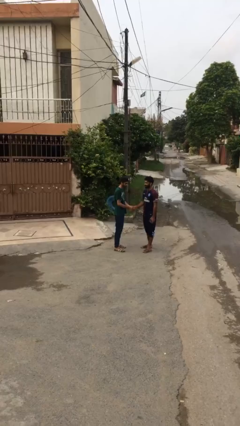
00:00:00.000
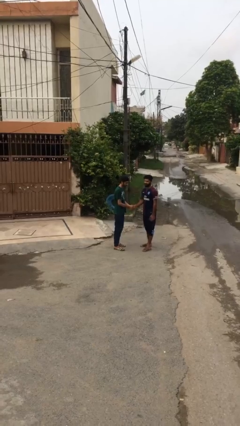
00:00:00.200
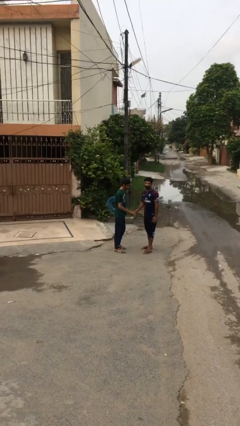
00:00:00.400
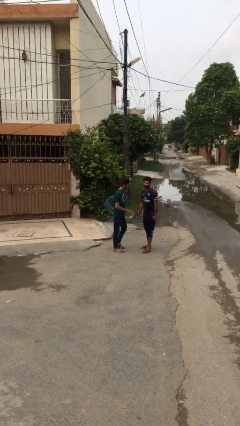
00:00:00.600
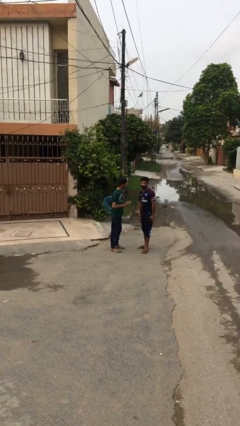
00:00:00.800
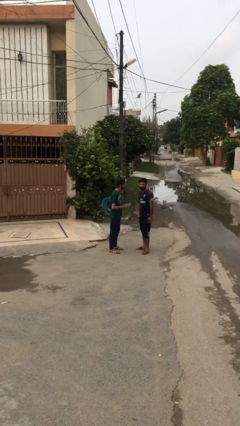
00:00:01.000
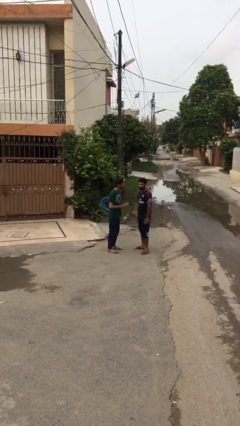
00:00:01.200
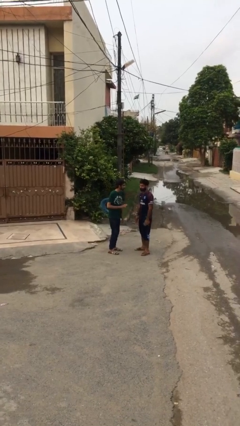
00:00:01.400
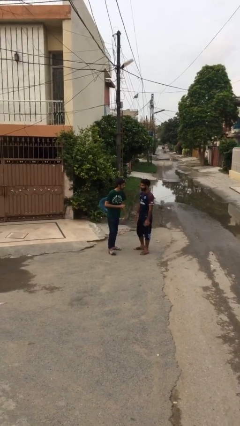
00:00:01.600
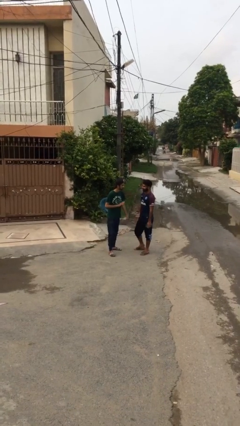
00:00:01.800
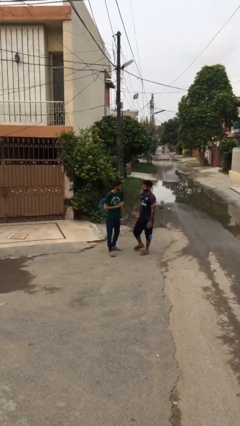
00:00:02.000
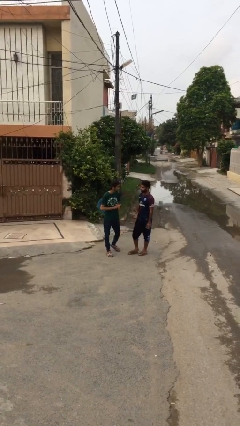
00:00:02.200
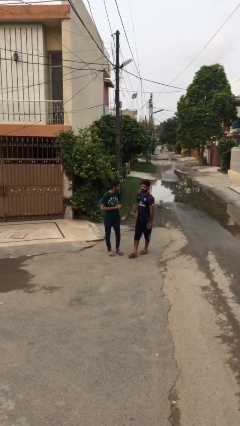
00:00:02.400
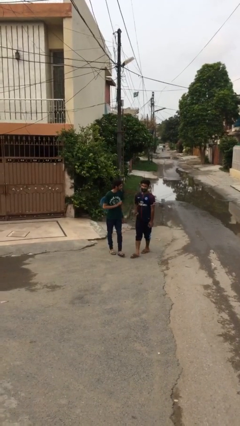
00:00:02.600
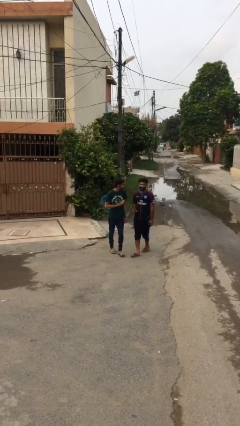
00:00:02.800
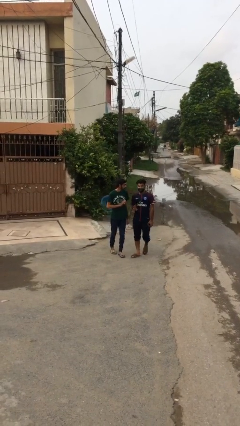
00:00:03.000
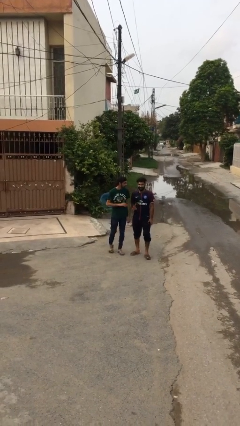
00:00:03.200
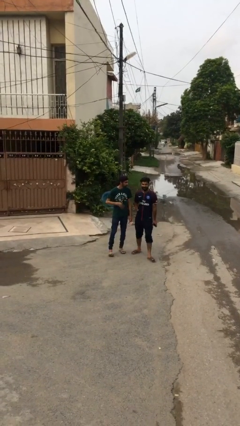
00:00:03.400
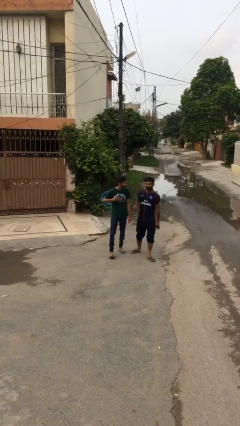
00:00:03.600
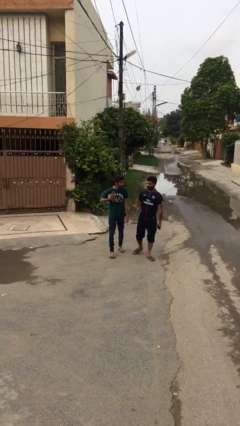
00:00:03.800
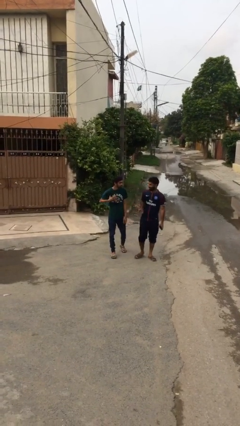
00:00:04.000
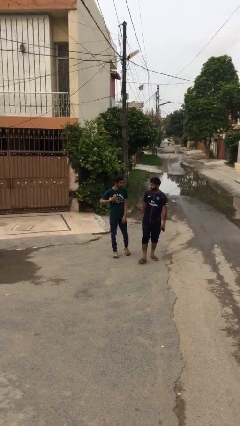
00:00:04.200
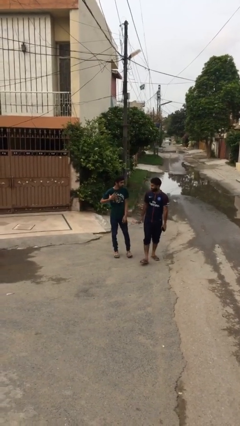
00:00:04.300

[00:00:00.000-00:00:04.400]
person talks to person

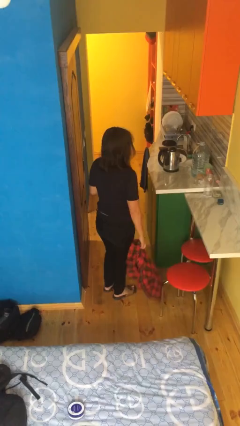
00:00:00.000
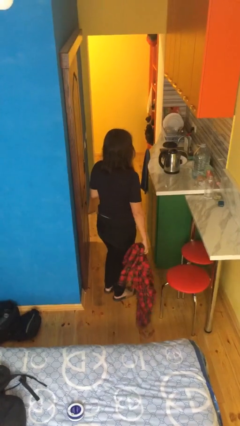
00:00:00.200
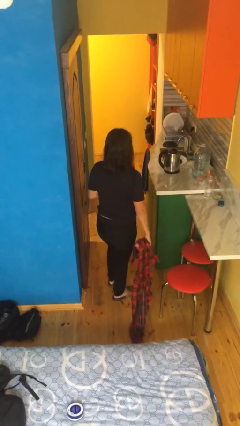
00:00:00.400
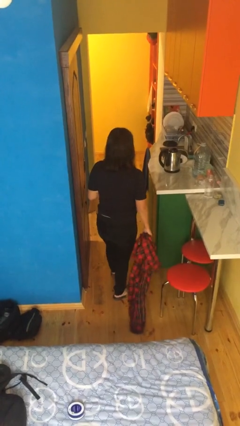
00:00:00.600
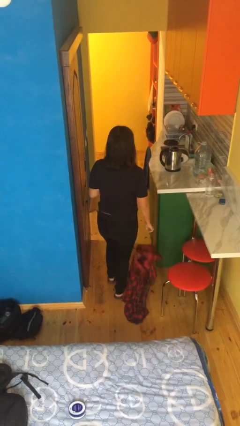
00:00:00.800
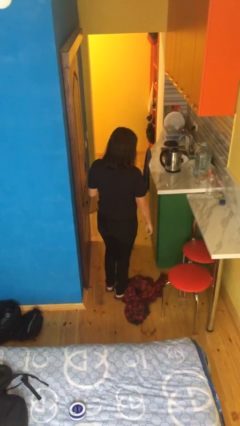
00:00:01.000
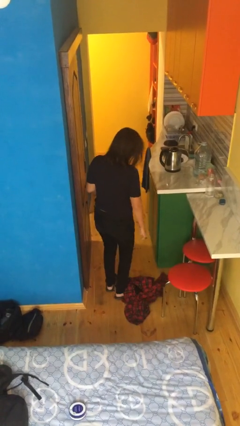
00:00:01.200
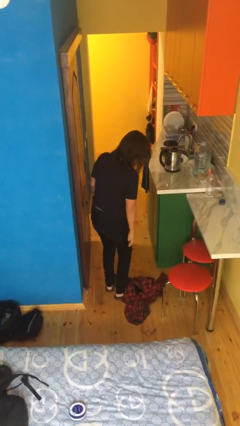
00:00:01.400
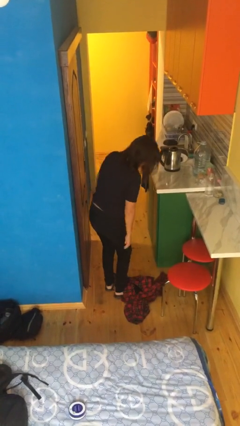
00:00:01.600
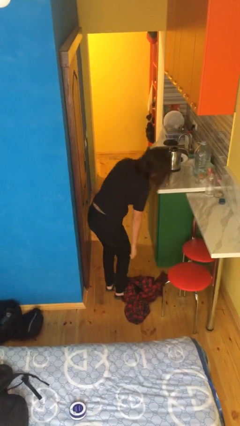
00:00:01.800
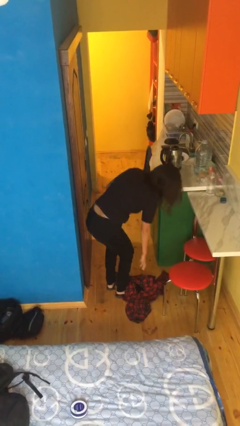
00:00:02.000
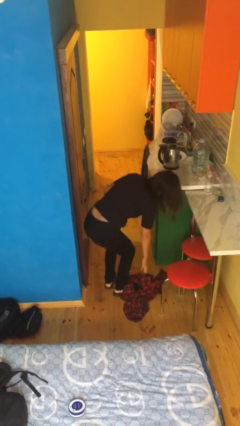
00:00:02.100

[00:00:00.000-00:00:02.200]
person drops object

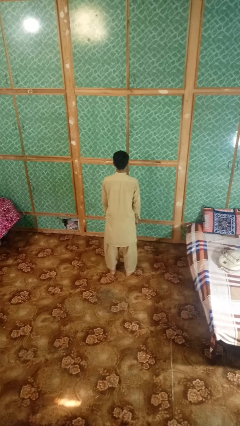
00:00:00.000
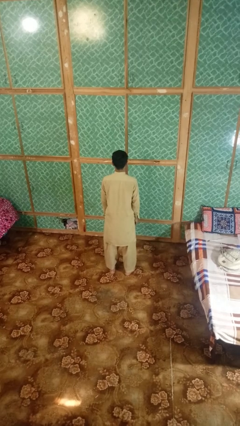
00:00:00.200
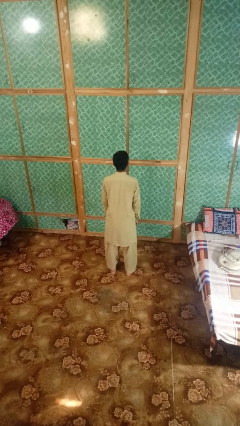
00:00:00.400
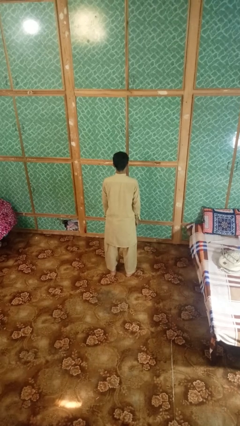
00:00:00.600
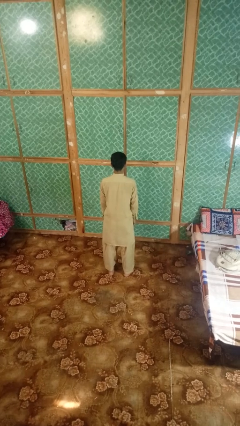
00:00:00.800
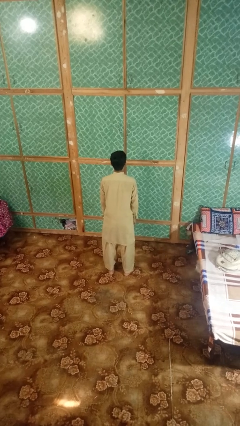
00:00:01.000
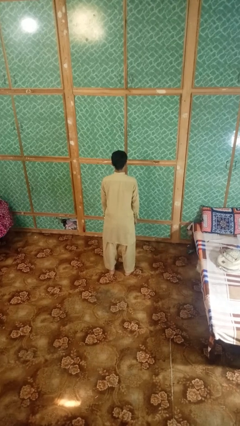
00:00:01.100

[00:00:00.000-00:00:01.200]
person shakes head

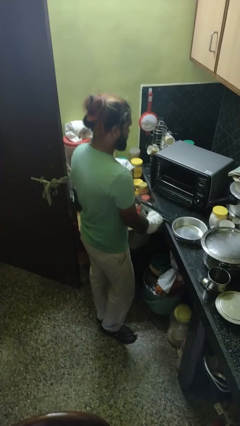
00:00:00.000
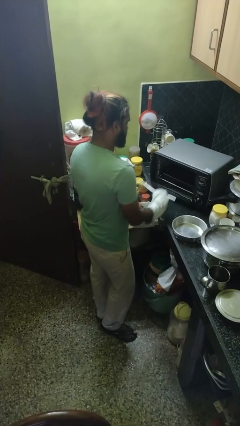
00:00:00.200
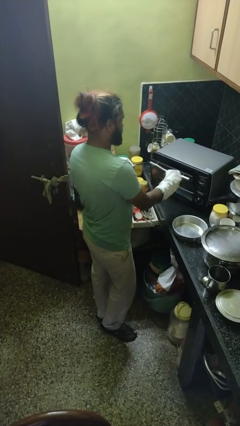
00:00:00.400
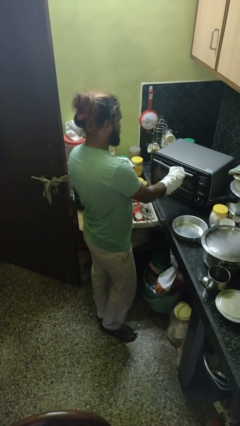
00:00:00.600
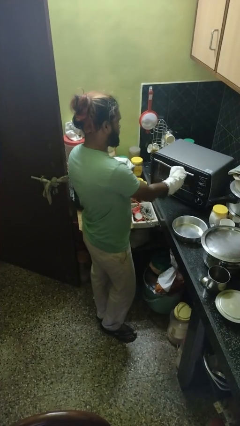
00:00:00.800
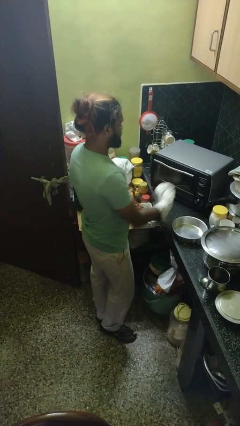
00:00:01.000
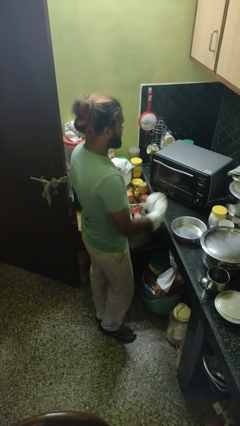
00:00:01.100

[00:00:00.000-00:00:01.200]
person closes oven door

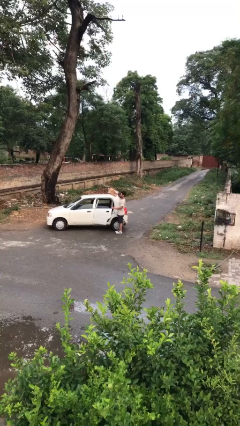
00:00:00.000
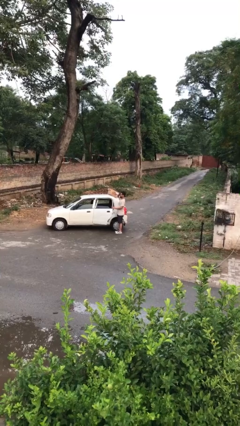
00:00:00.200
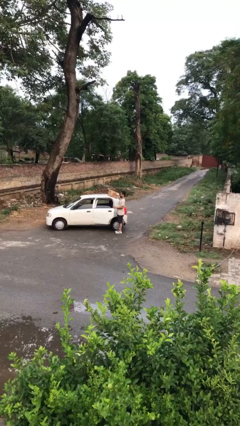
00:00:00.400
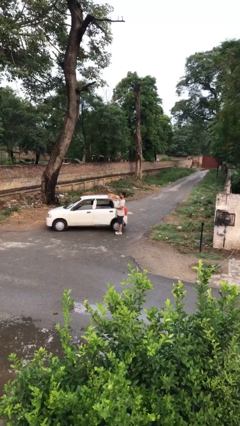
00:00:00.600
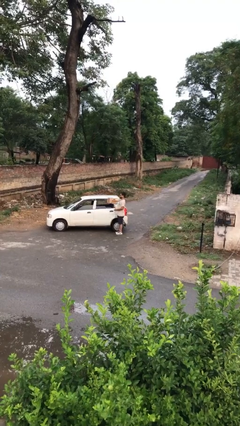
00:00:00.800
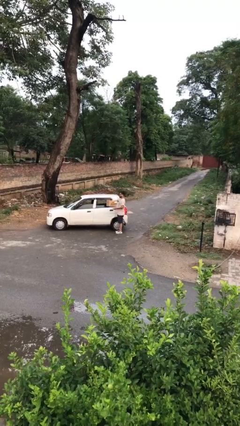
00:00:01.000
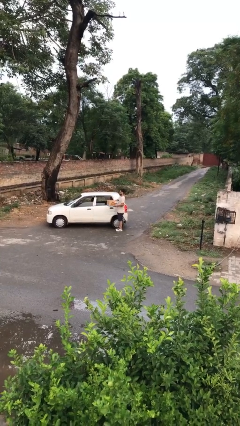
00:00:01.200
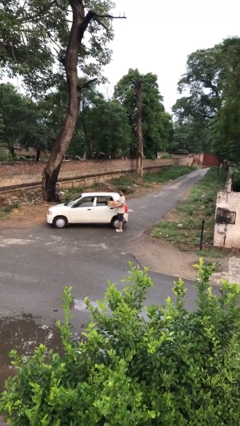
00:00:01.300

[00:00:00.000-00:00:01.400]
person closes car door

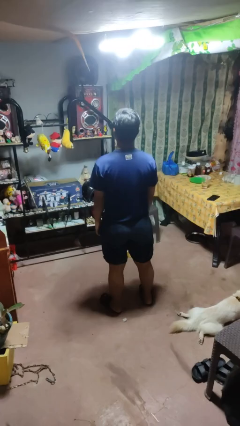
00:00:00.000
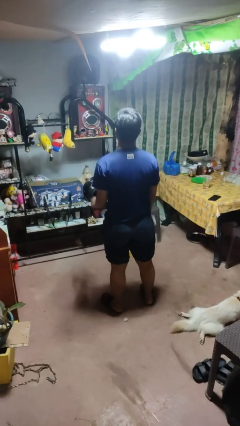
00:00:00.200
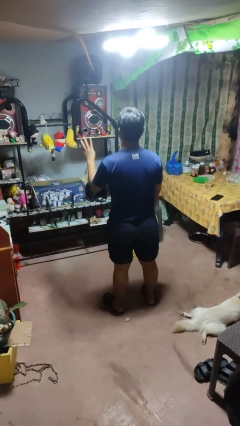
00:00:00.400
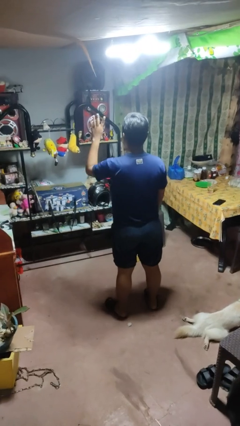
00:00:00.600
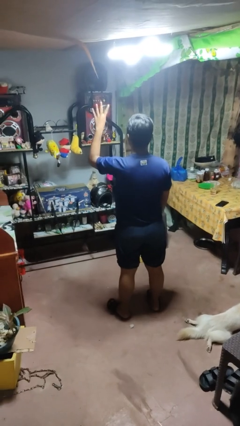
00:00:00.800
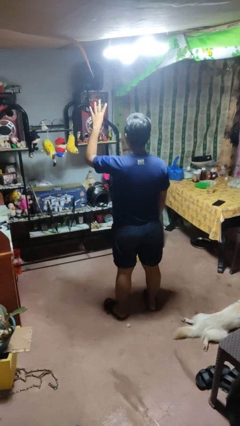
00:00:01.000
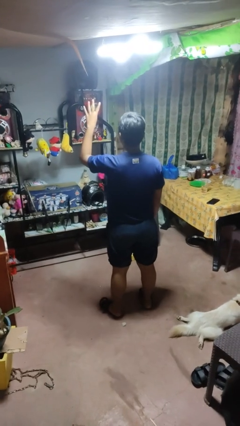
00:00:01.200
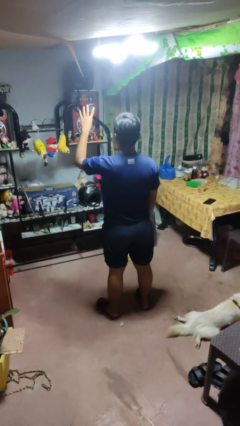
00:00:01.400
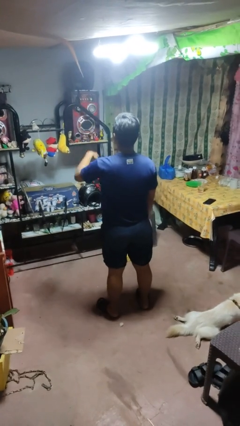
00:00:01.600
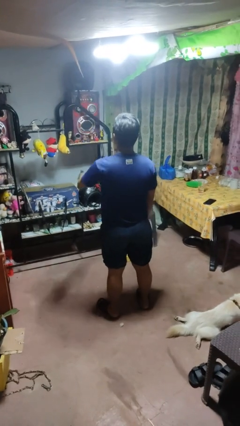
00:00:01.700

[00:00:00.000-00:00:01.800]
person gestures number four

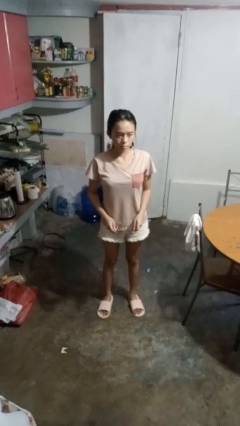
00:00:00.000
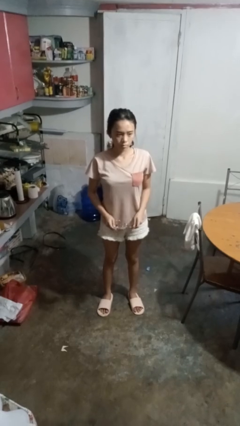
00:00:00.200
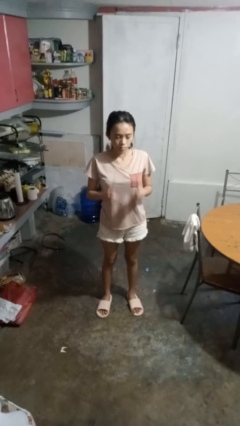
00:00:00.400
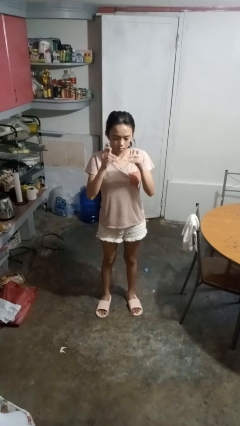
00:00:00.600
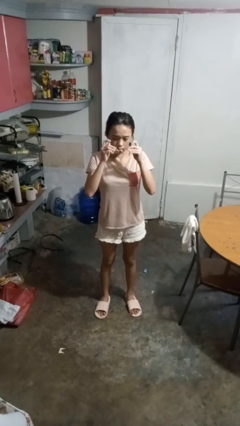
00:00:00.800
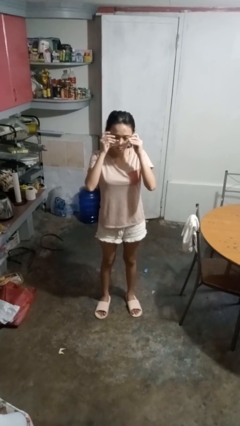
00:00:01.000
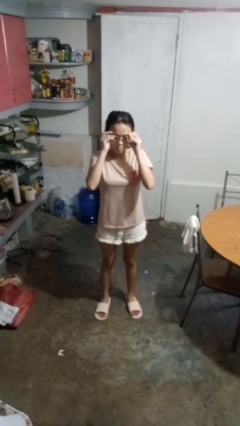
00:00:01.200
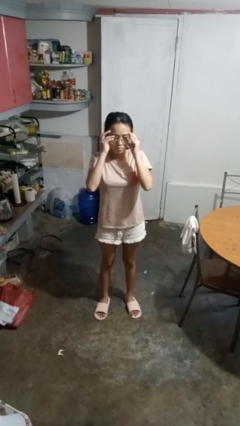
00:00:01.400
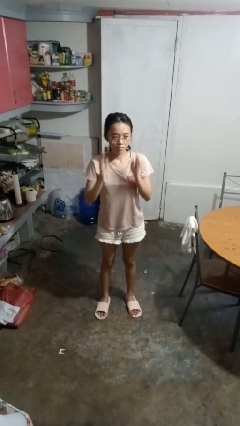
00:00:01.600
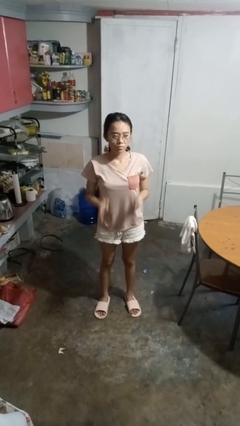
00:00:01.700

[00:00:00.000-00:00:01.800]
person puts on glasses

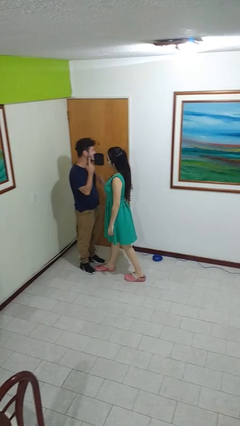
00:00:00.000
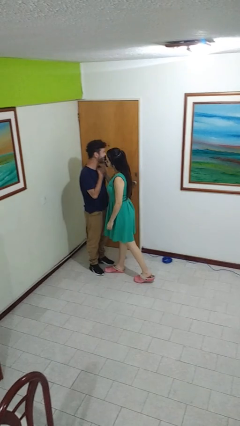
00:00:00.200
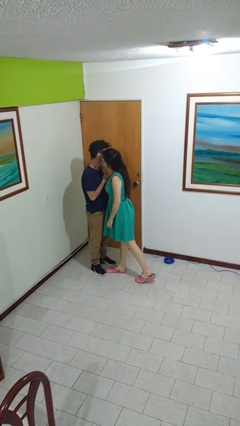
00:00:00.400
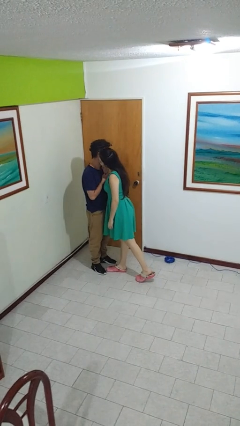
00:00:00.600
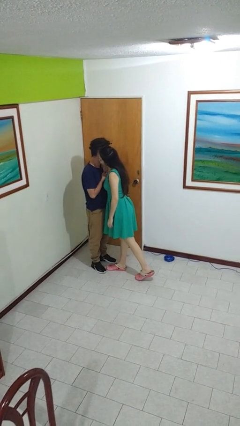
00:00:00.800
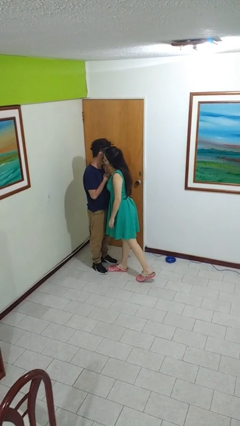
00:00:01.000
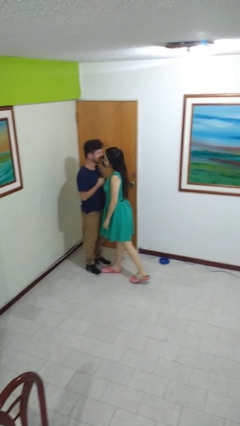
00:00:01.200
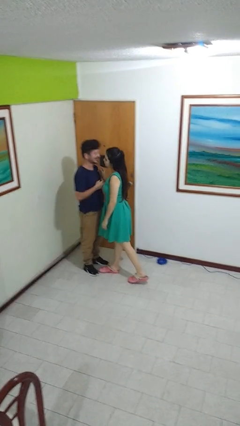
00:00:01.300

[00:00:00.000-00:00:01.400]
person kisses cheek of person

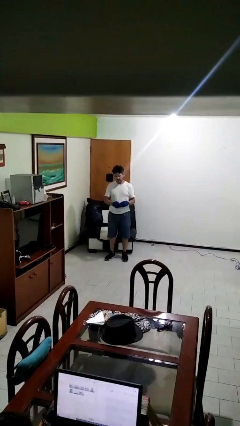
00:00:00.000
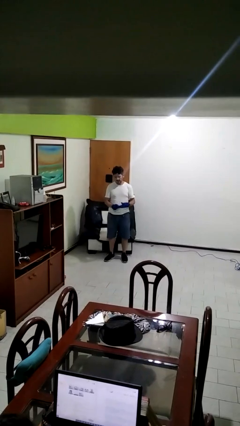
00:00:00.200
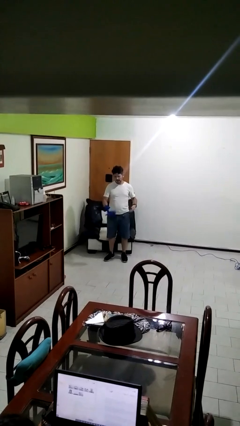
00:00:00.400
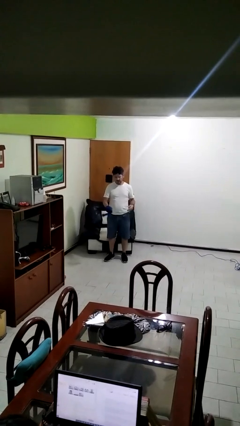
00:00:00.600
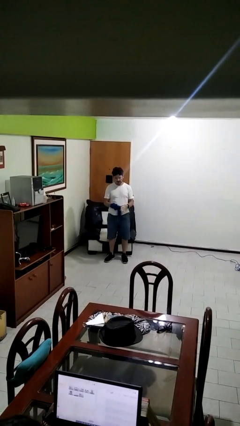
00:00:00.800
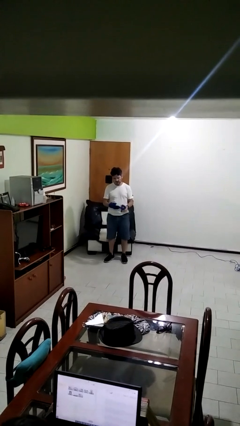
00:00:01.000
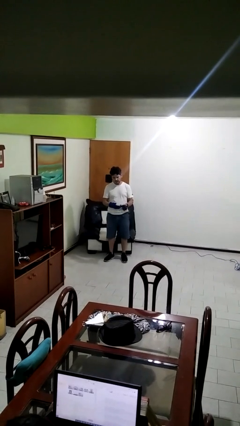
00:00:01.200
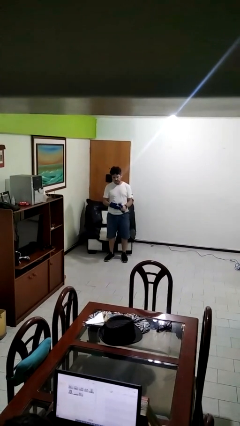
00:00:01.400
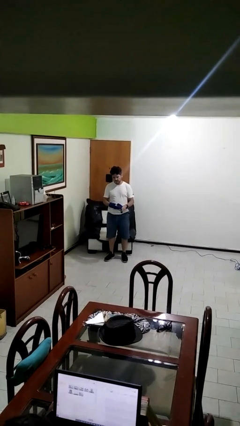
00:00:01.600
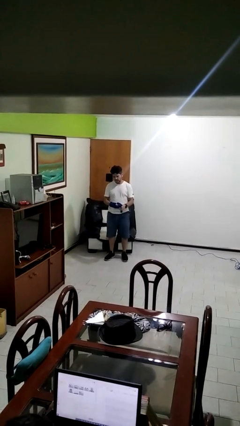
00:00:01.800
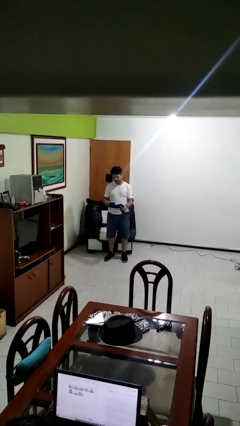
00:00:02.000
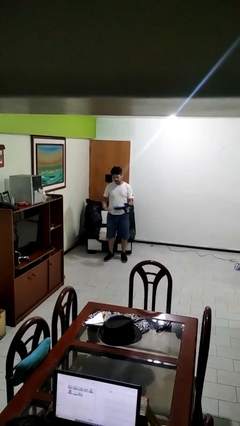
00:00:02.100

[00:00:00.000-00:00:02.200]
person takes off gloves
